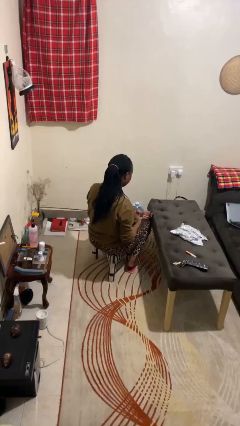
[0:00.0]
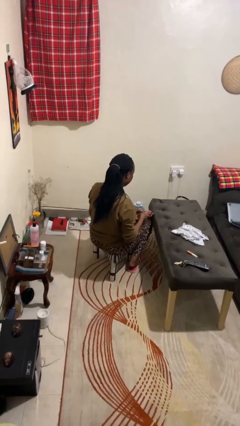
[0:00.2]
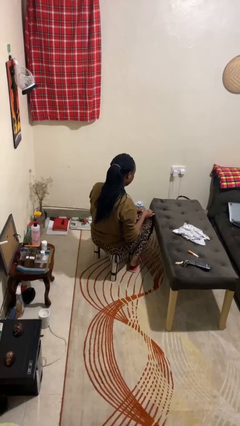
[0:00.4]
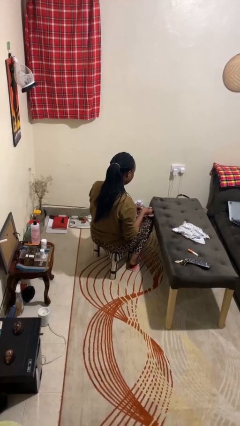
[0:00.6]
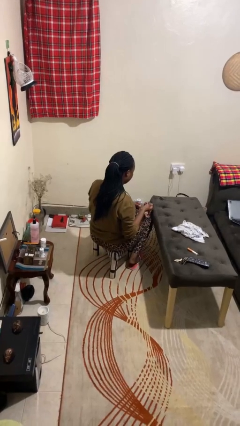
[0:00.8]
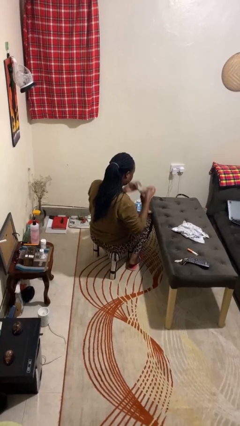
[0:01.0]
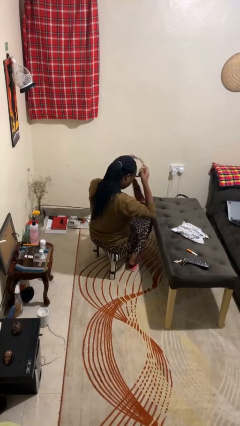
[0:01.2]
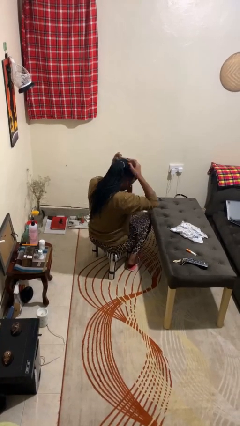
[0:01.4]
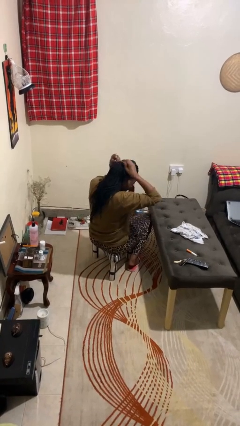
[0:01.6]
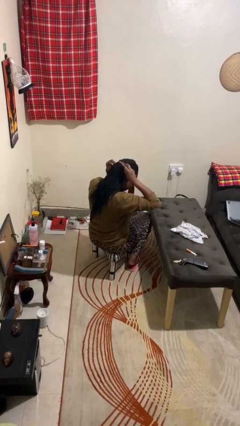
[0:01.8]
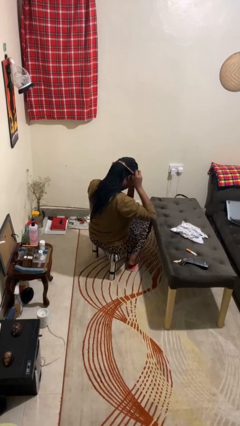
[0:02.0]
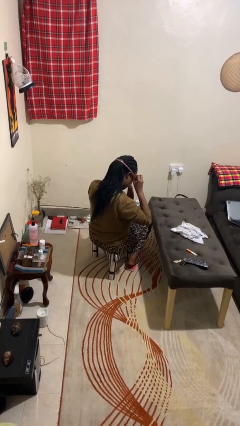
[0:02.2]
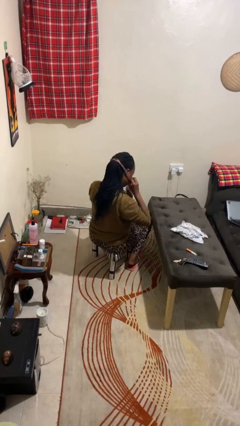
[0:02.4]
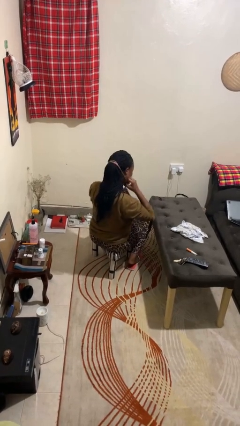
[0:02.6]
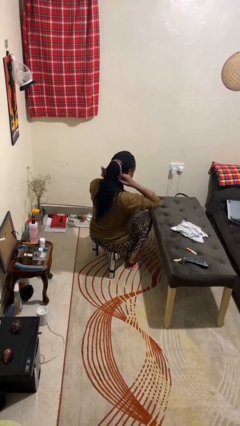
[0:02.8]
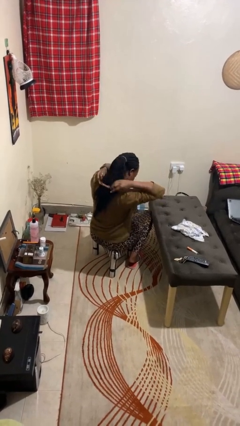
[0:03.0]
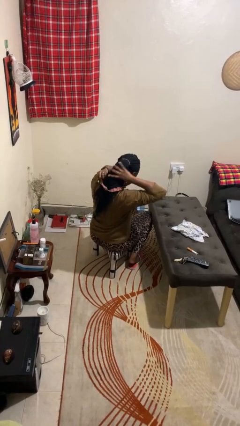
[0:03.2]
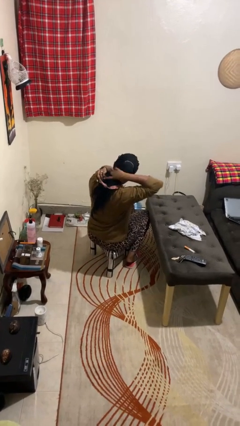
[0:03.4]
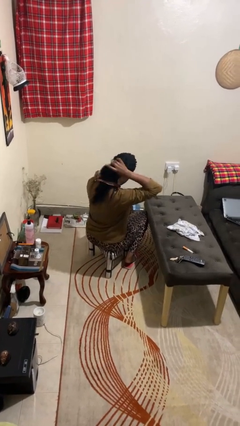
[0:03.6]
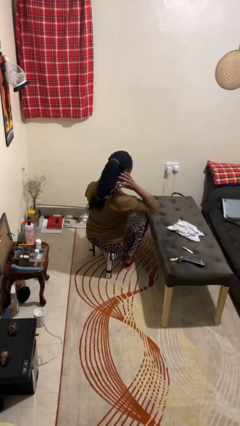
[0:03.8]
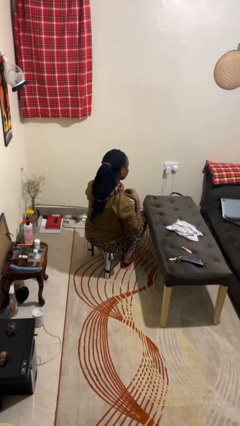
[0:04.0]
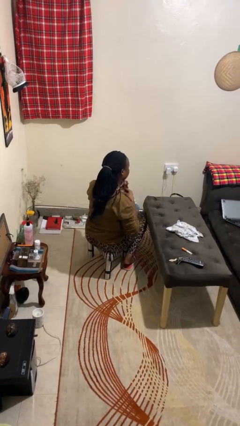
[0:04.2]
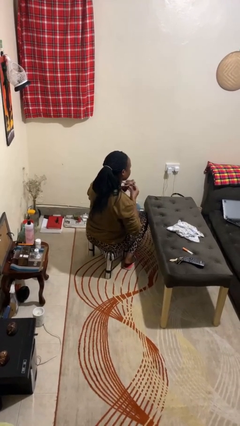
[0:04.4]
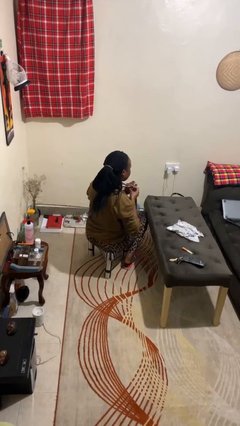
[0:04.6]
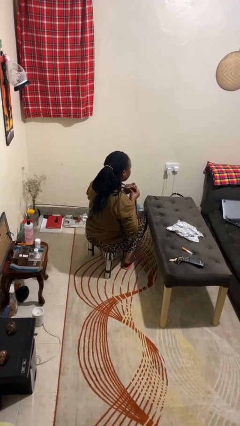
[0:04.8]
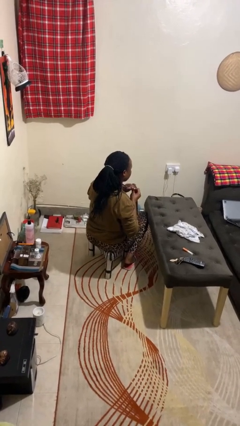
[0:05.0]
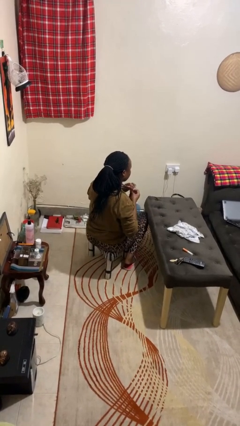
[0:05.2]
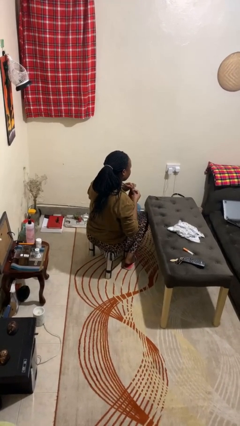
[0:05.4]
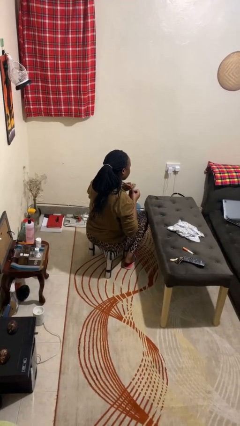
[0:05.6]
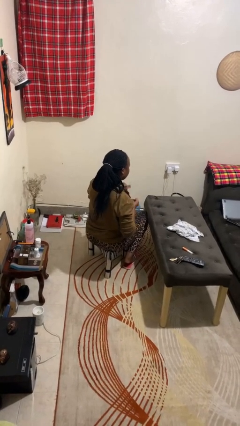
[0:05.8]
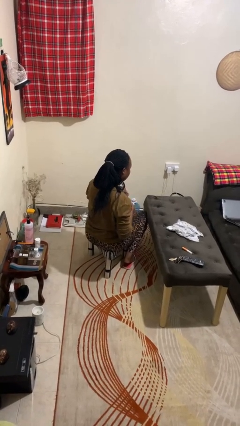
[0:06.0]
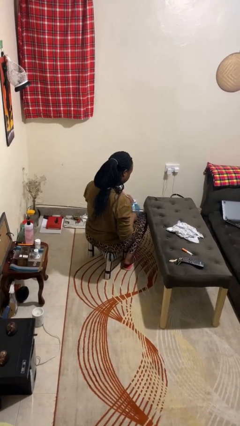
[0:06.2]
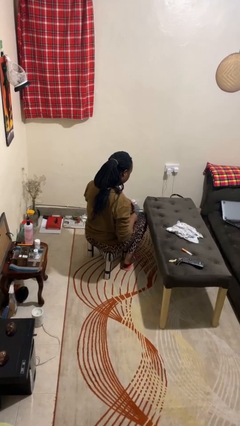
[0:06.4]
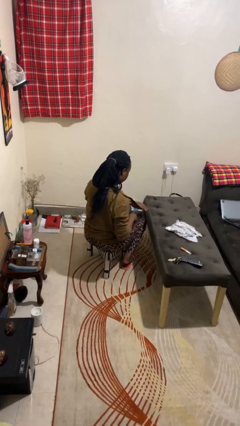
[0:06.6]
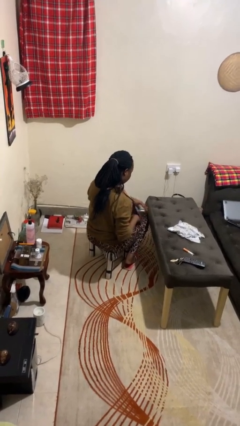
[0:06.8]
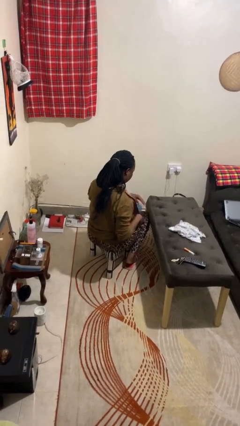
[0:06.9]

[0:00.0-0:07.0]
person puts on necktie

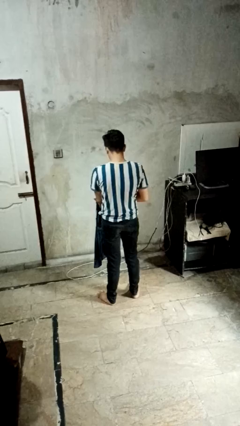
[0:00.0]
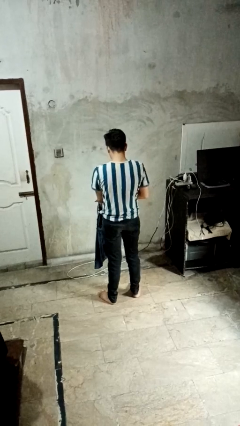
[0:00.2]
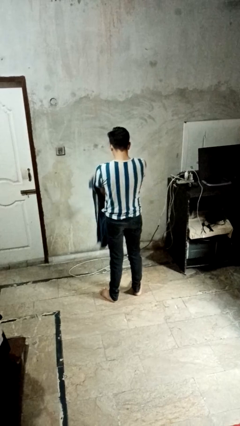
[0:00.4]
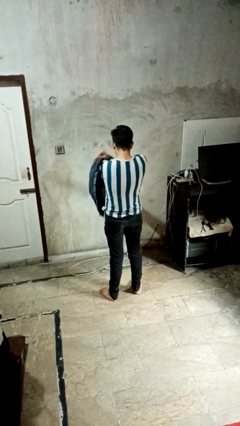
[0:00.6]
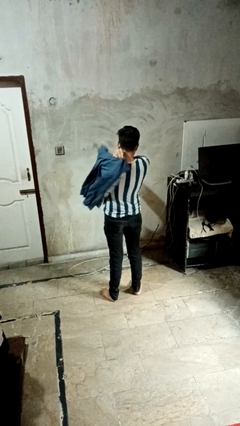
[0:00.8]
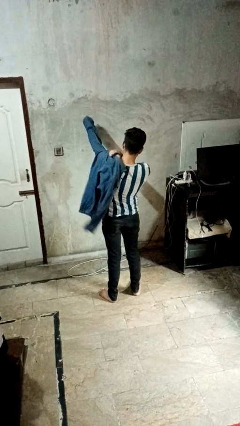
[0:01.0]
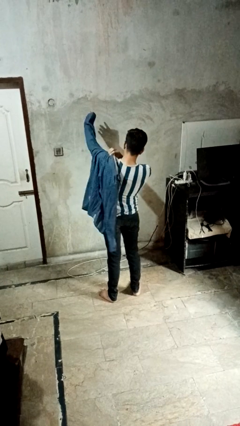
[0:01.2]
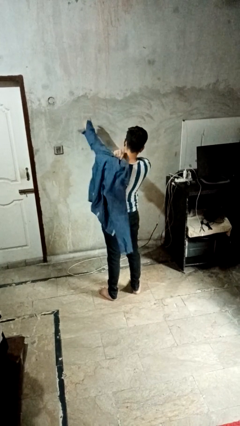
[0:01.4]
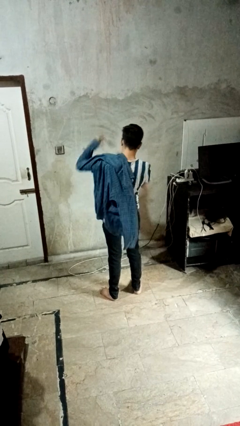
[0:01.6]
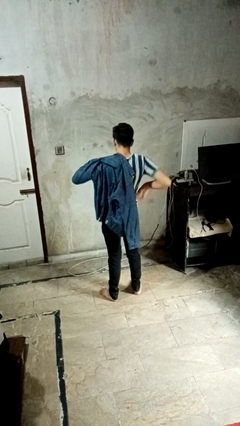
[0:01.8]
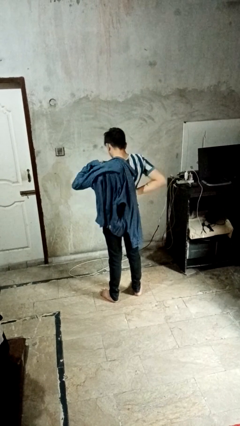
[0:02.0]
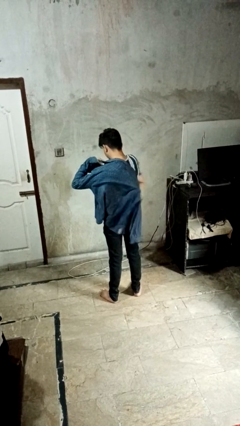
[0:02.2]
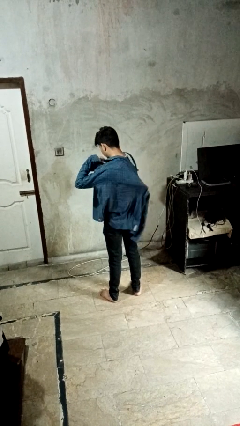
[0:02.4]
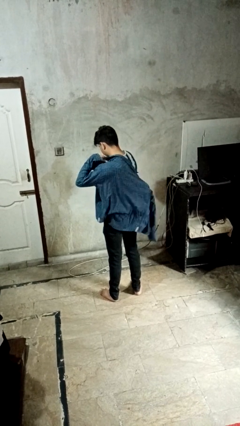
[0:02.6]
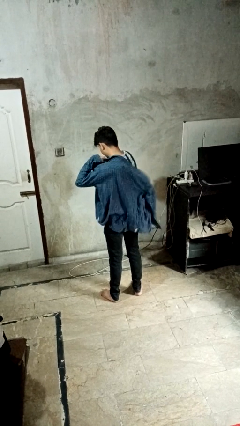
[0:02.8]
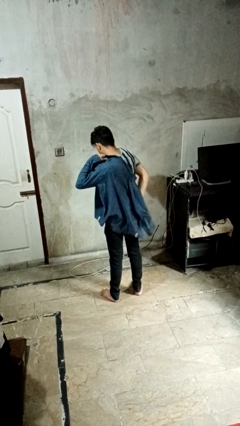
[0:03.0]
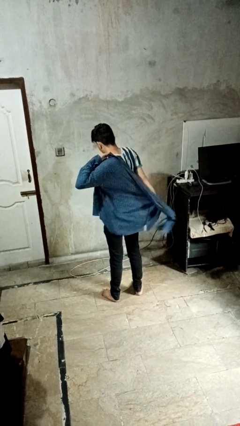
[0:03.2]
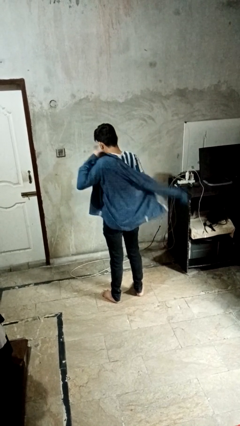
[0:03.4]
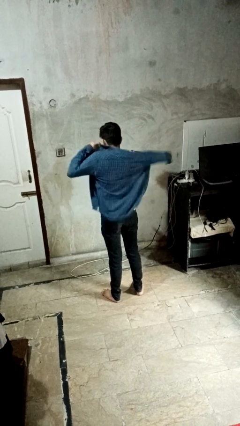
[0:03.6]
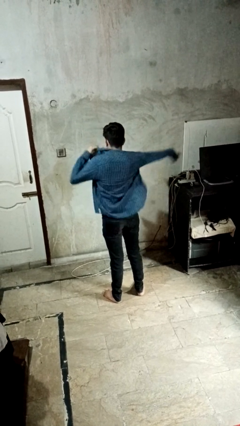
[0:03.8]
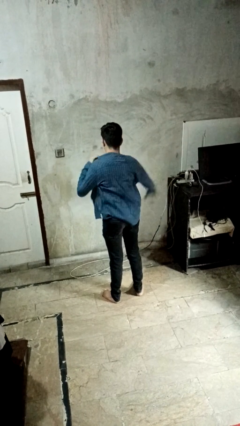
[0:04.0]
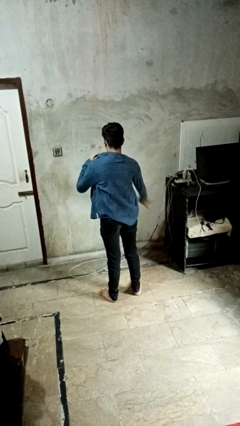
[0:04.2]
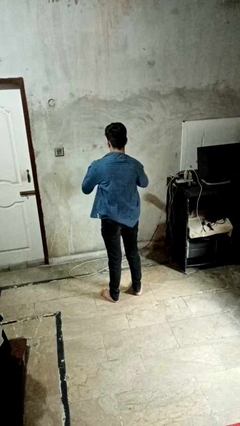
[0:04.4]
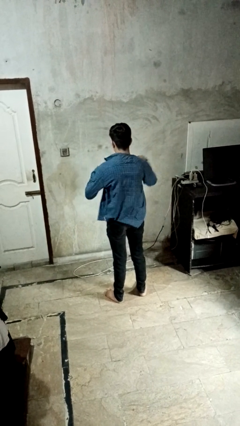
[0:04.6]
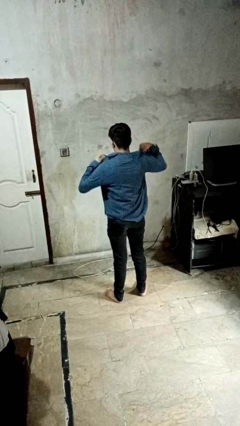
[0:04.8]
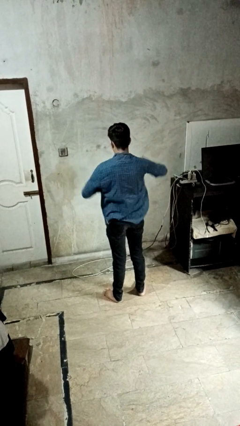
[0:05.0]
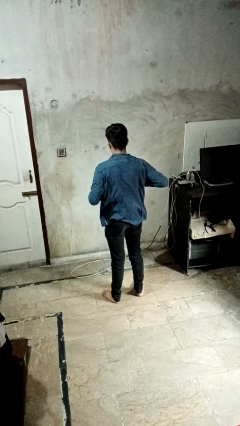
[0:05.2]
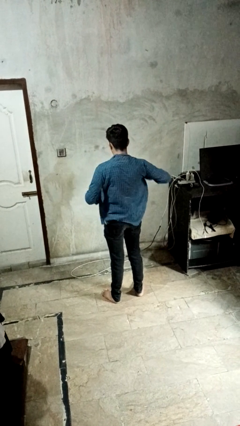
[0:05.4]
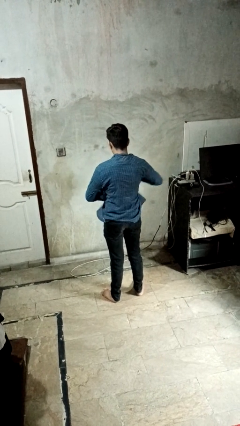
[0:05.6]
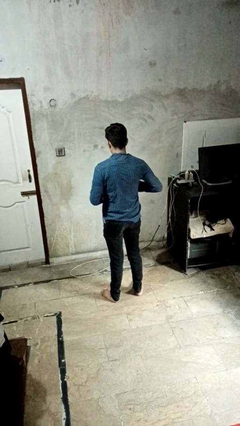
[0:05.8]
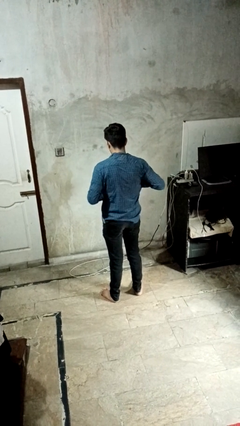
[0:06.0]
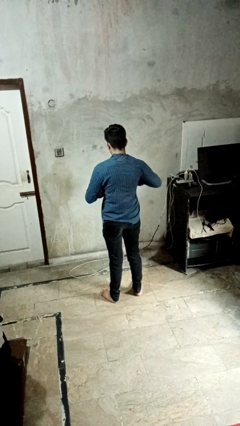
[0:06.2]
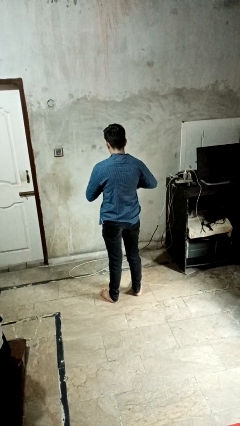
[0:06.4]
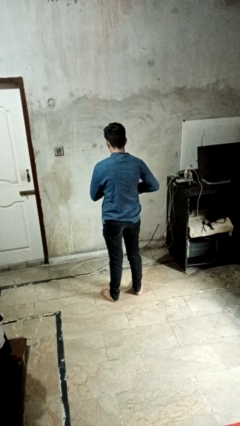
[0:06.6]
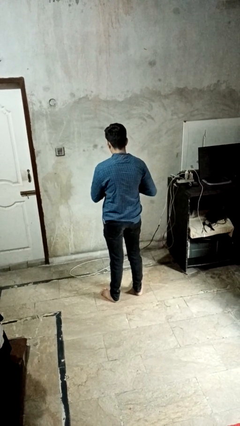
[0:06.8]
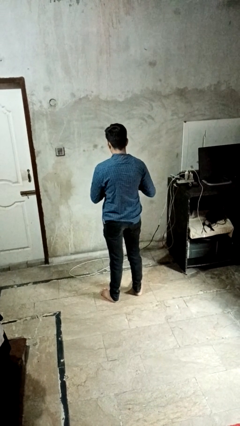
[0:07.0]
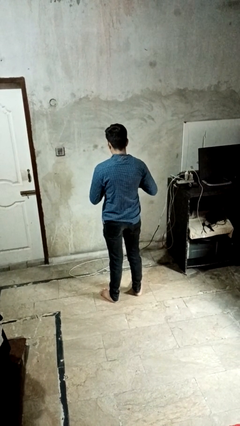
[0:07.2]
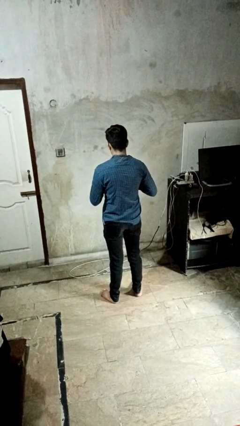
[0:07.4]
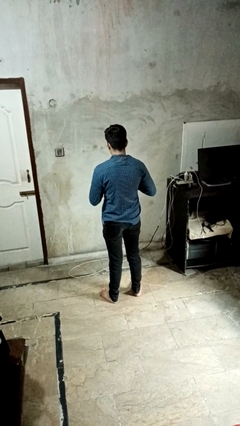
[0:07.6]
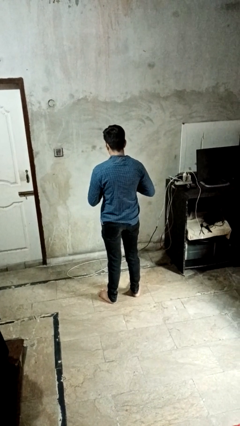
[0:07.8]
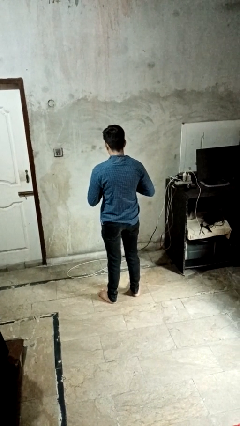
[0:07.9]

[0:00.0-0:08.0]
person puts on shirt

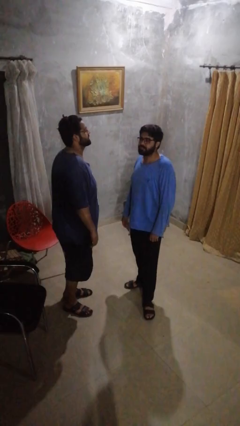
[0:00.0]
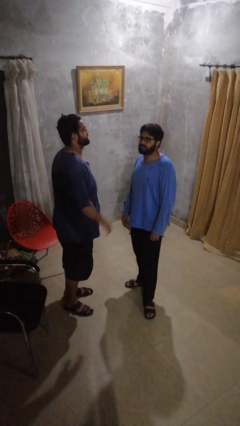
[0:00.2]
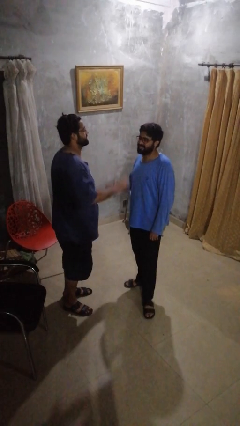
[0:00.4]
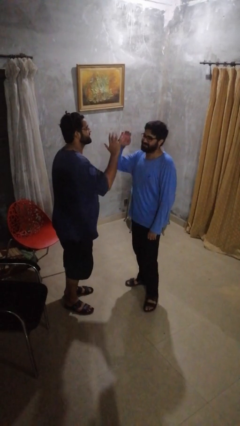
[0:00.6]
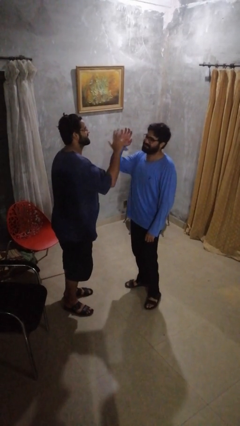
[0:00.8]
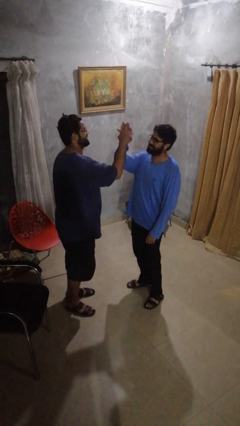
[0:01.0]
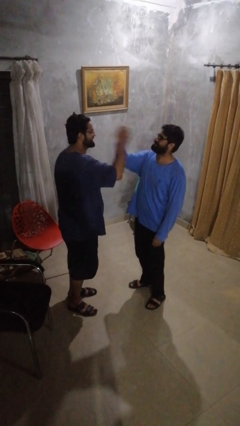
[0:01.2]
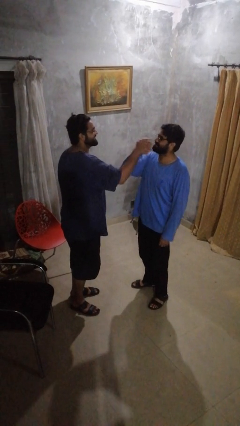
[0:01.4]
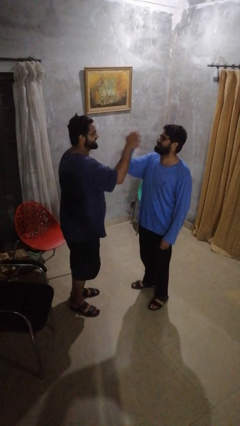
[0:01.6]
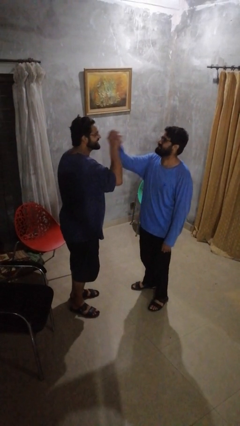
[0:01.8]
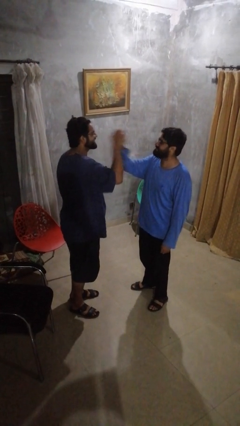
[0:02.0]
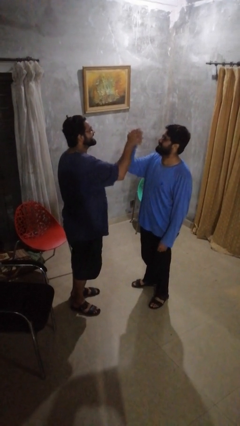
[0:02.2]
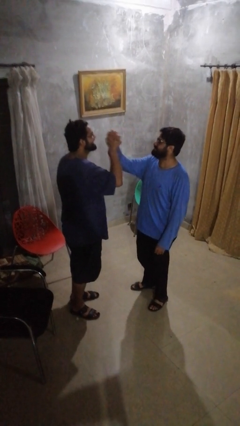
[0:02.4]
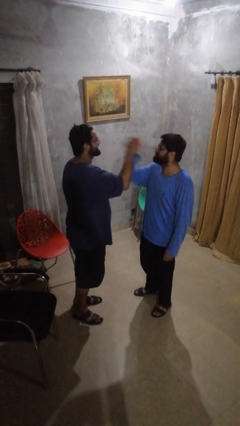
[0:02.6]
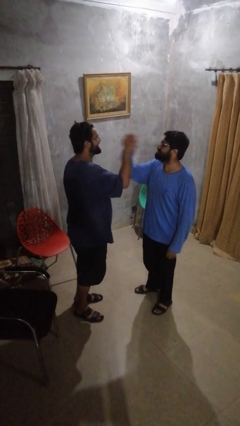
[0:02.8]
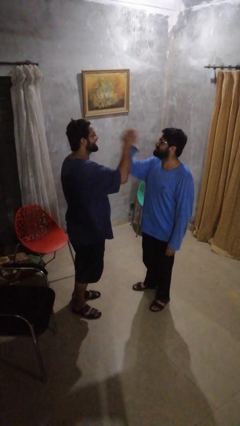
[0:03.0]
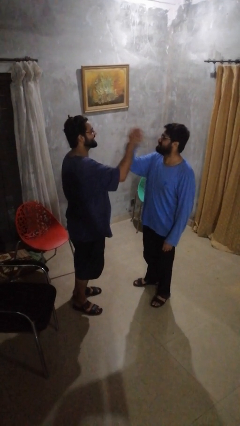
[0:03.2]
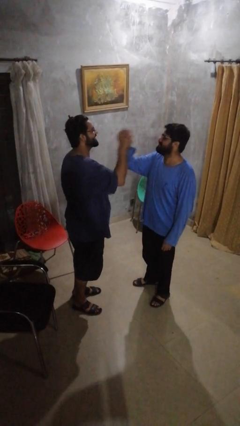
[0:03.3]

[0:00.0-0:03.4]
person highfives hand
